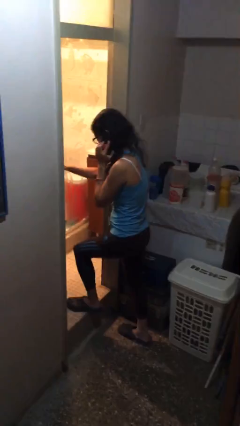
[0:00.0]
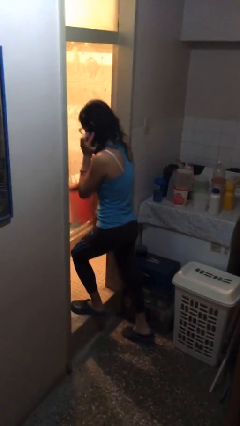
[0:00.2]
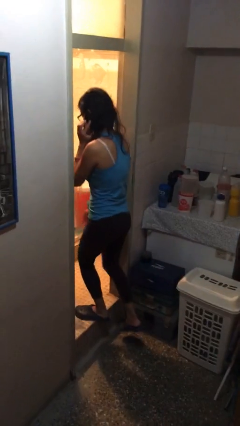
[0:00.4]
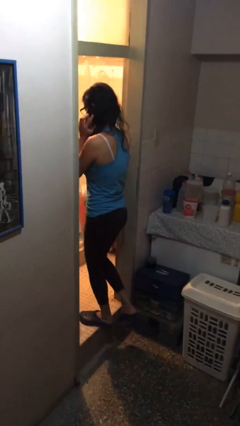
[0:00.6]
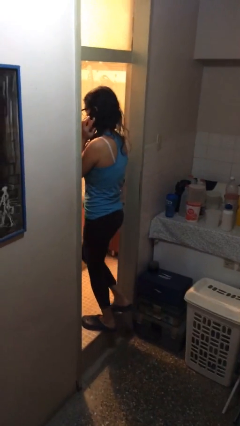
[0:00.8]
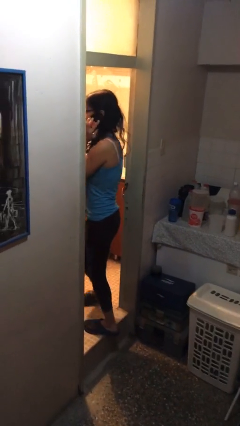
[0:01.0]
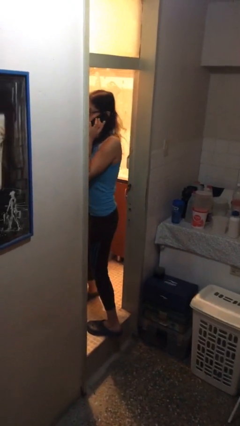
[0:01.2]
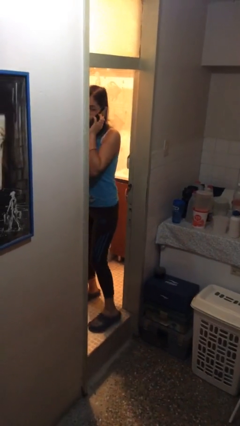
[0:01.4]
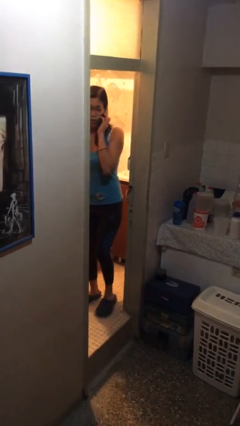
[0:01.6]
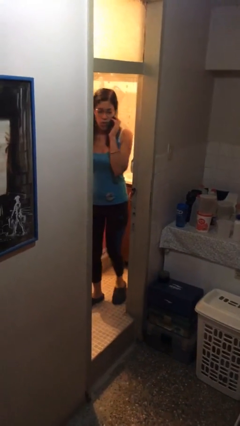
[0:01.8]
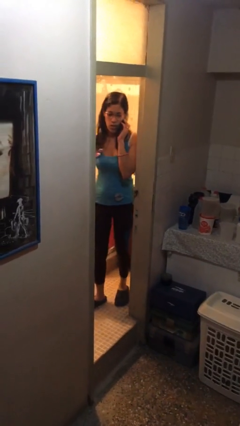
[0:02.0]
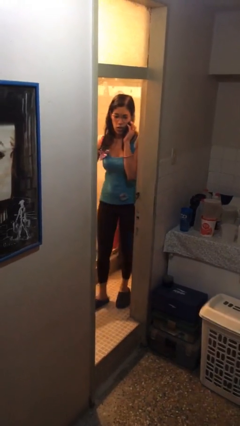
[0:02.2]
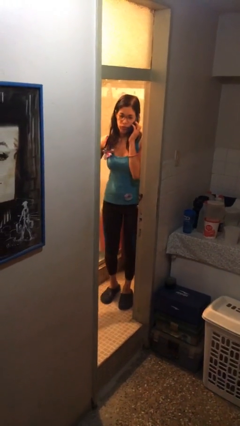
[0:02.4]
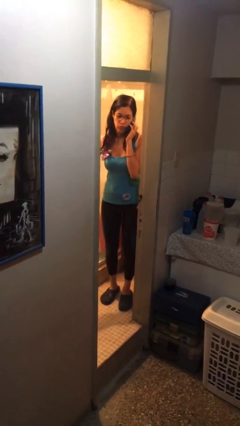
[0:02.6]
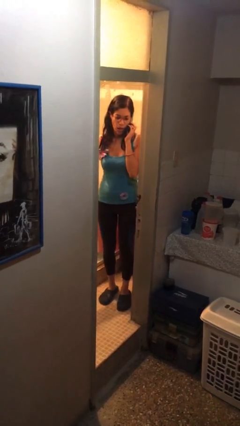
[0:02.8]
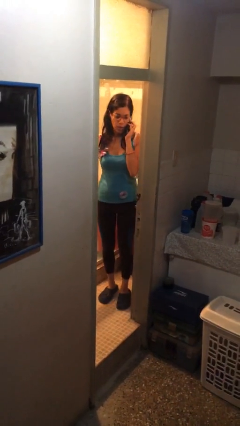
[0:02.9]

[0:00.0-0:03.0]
person exits scene through structure

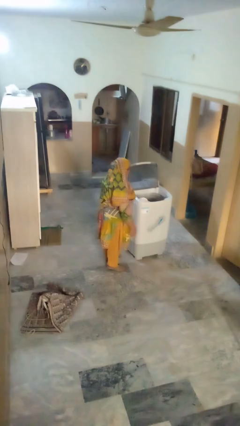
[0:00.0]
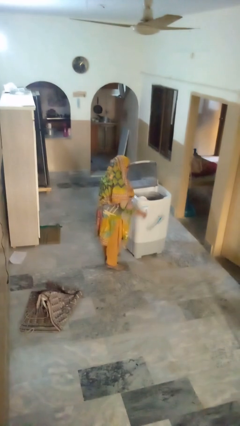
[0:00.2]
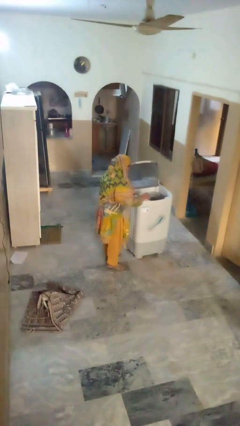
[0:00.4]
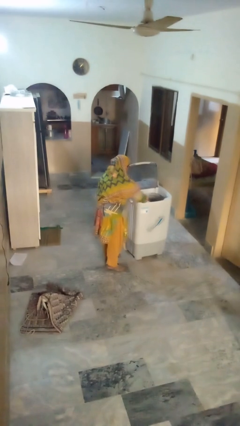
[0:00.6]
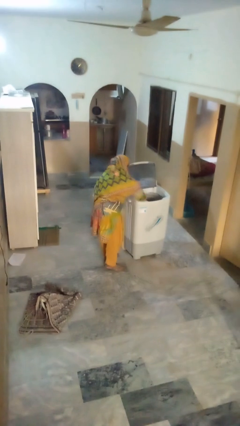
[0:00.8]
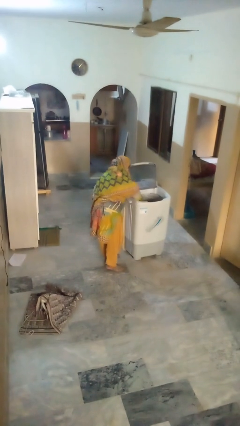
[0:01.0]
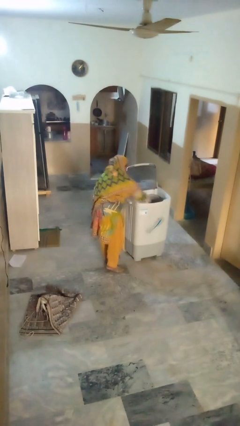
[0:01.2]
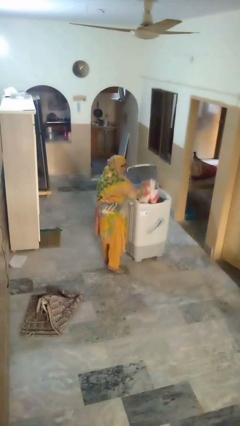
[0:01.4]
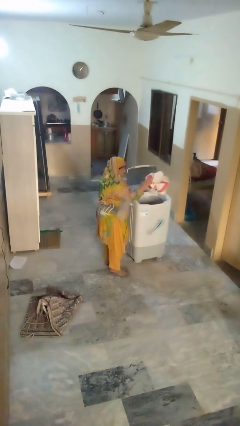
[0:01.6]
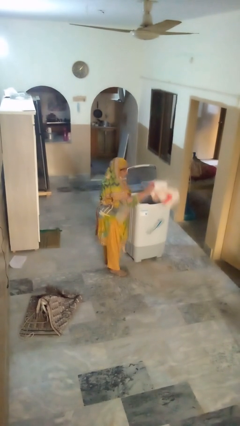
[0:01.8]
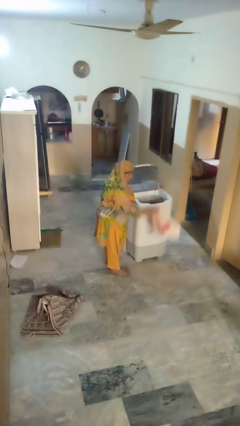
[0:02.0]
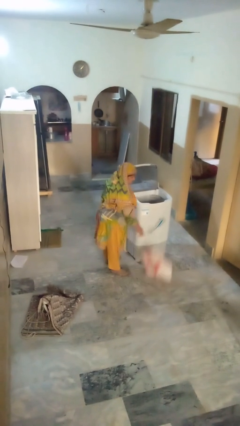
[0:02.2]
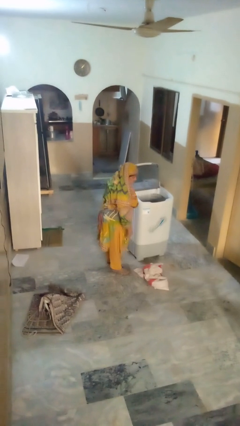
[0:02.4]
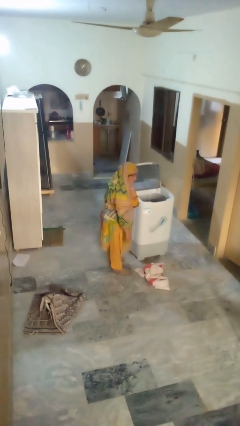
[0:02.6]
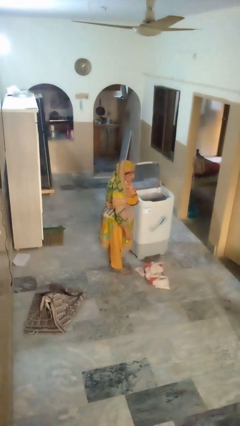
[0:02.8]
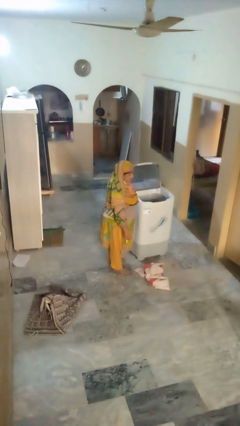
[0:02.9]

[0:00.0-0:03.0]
person unloads clotheswasher

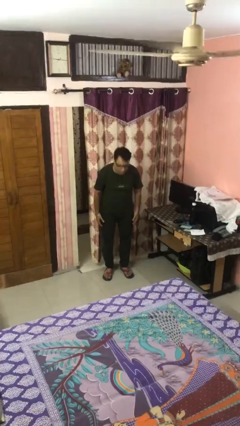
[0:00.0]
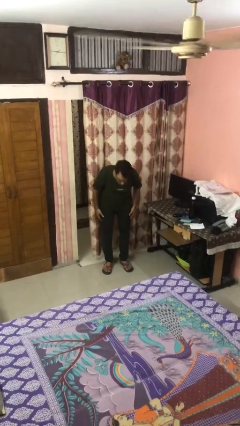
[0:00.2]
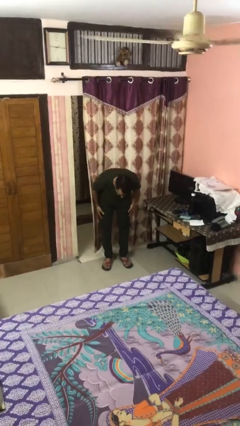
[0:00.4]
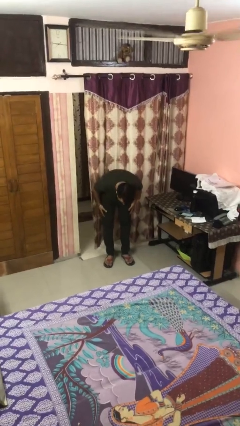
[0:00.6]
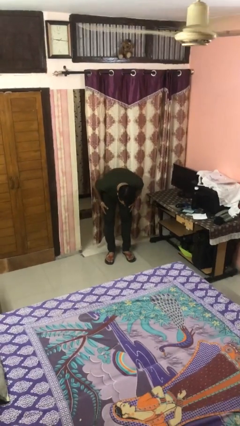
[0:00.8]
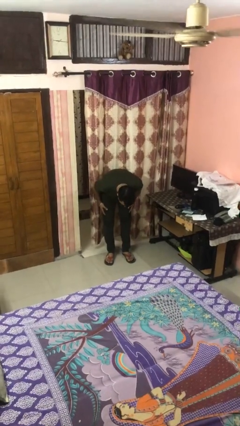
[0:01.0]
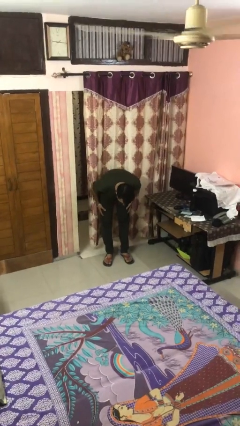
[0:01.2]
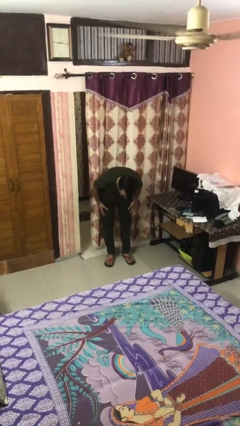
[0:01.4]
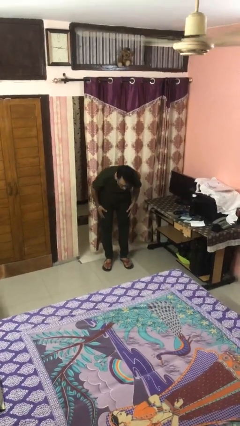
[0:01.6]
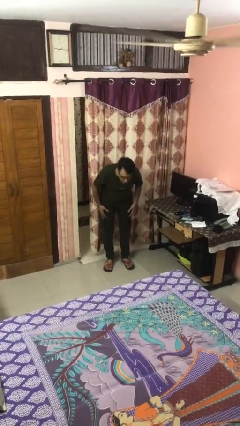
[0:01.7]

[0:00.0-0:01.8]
person bows

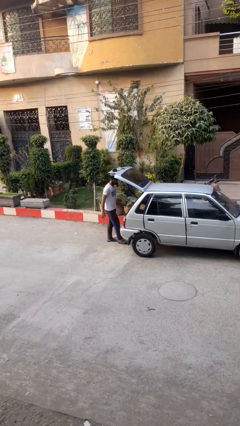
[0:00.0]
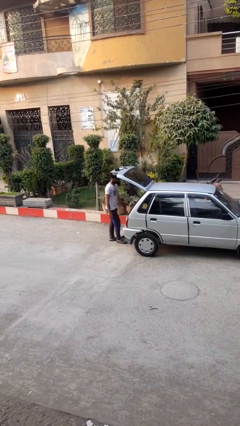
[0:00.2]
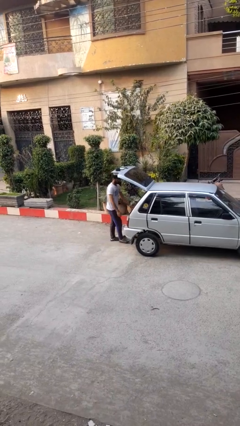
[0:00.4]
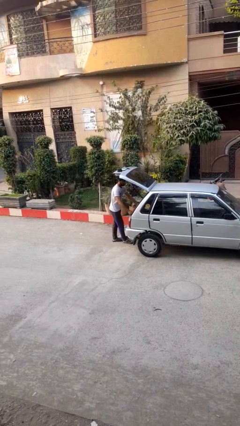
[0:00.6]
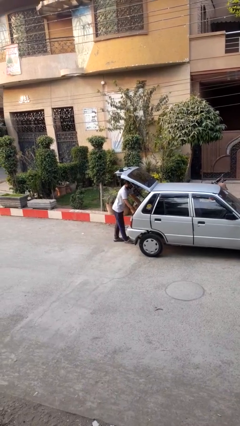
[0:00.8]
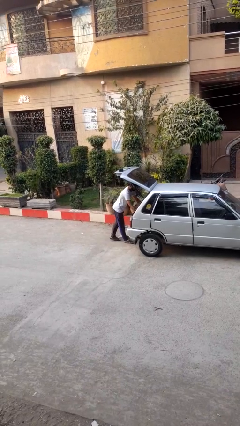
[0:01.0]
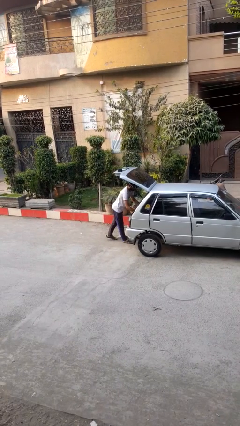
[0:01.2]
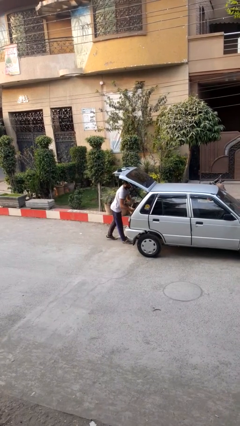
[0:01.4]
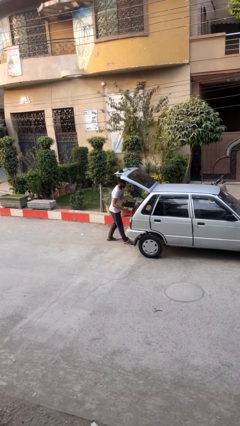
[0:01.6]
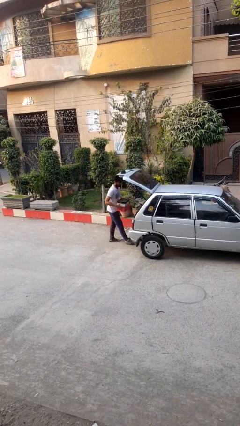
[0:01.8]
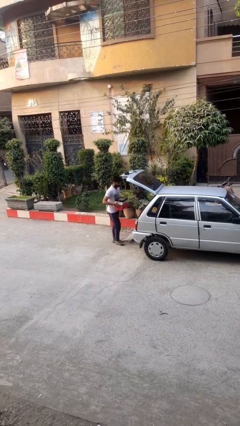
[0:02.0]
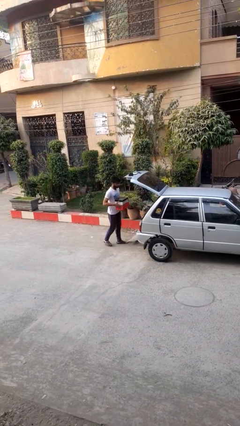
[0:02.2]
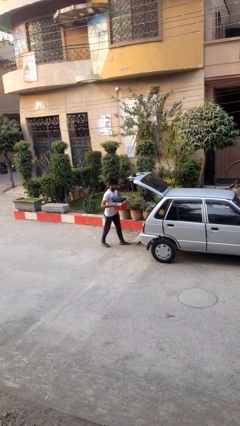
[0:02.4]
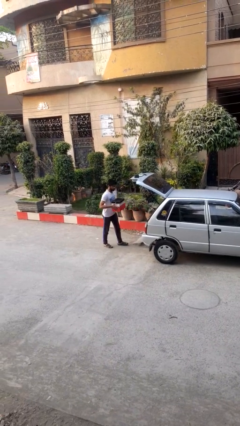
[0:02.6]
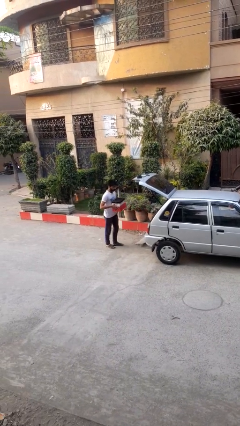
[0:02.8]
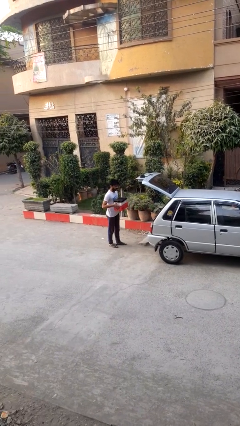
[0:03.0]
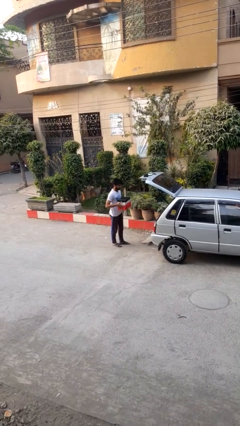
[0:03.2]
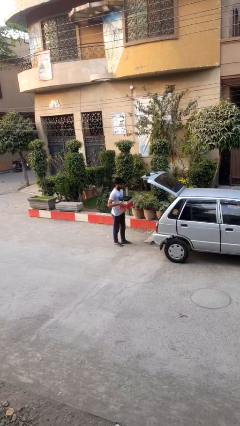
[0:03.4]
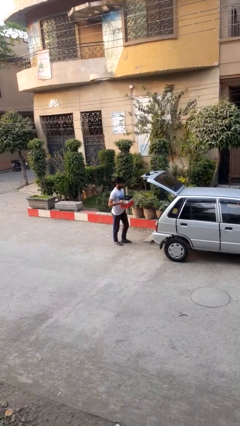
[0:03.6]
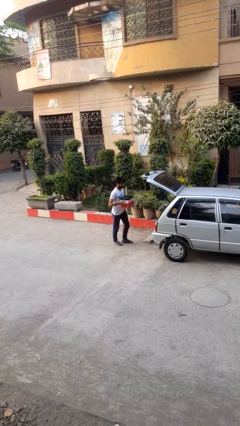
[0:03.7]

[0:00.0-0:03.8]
person unloads car

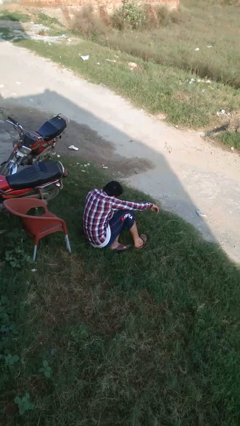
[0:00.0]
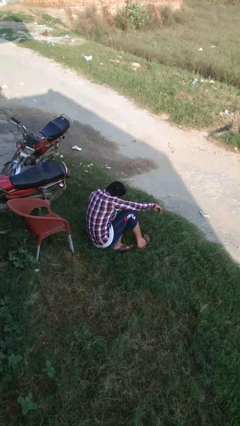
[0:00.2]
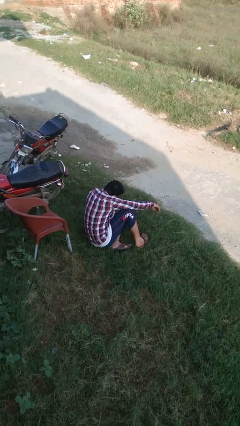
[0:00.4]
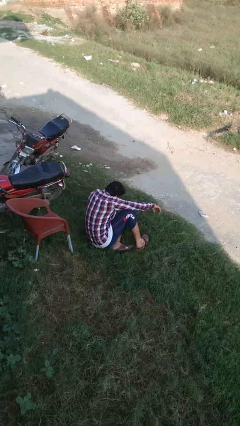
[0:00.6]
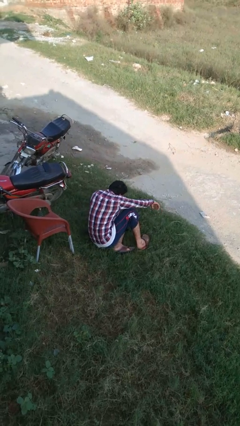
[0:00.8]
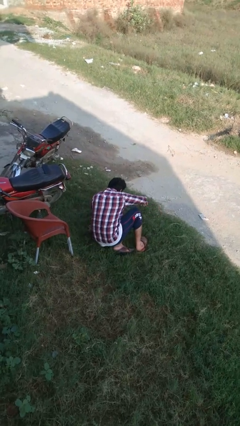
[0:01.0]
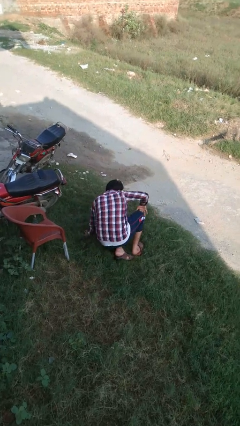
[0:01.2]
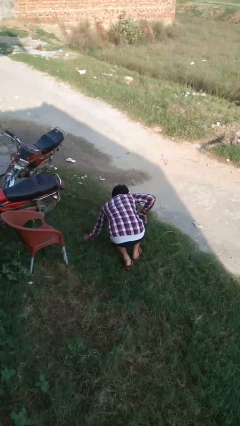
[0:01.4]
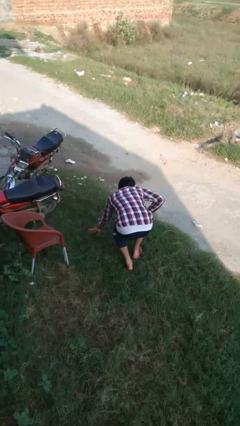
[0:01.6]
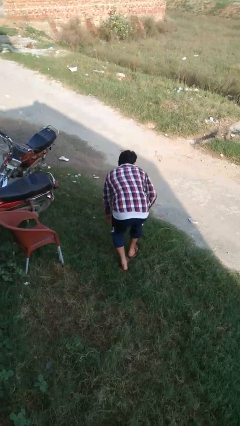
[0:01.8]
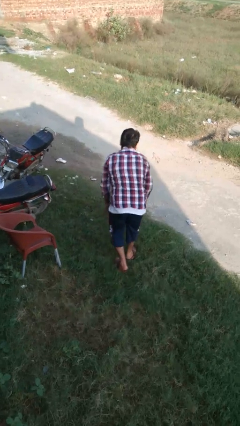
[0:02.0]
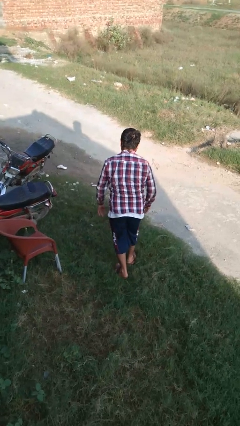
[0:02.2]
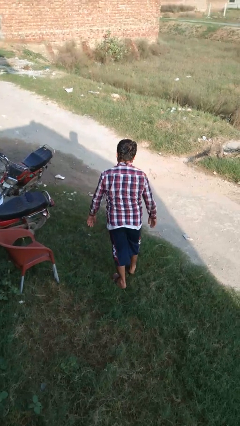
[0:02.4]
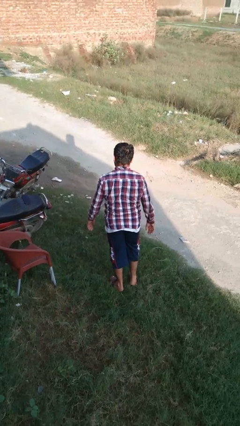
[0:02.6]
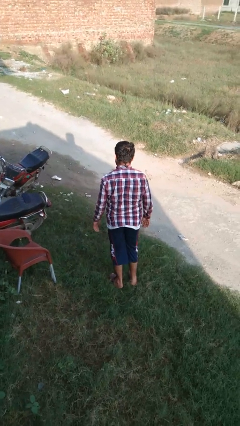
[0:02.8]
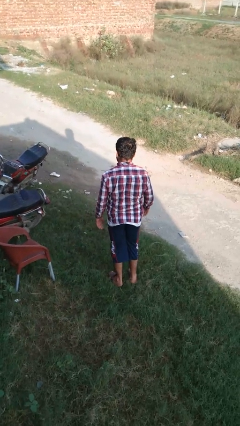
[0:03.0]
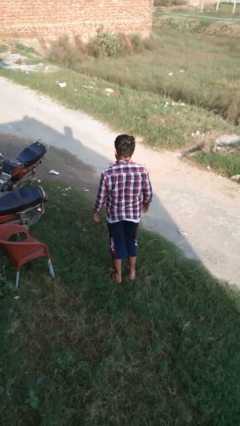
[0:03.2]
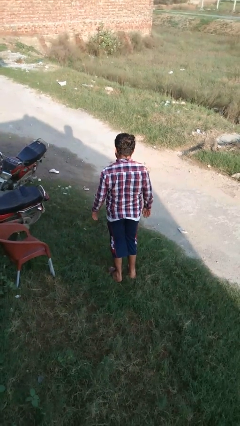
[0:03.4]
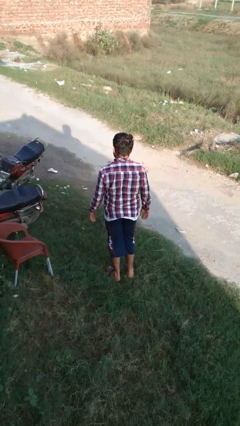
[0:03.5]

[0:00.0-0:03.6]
person stands up from floor

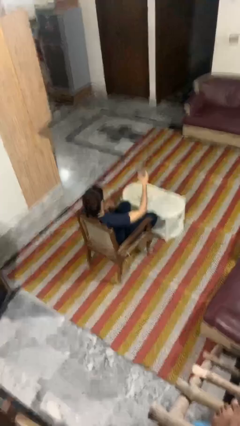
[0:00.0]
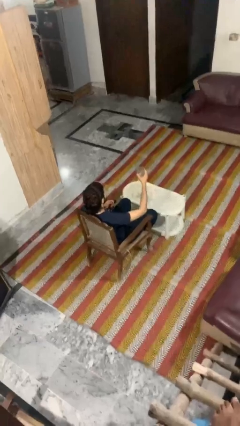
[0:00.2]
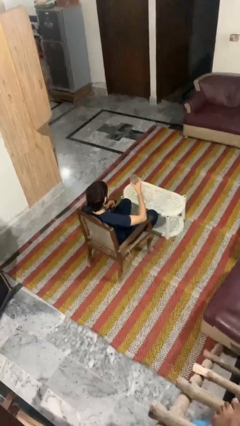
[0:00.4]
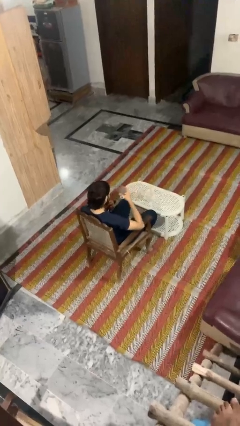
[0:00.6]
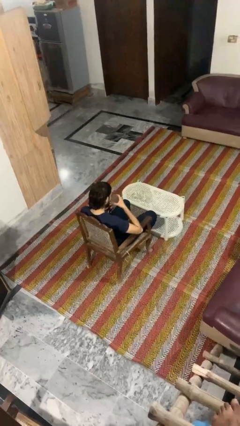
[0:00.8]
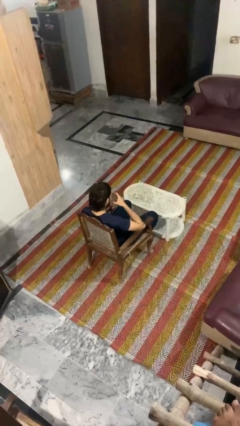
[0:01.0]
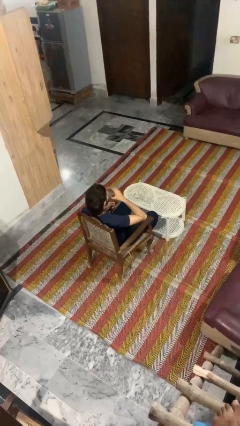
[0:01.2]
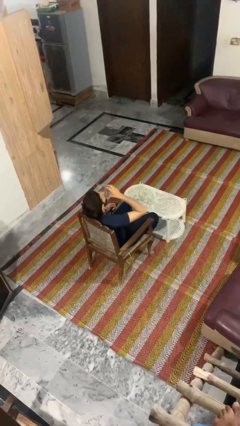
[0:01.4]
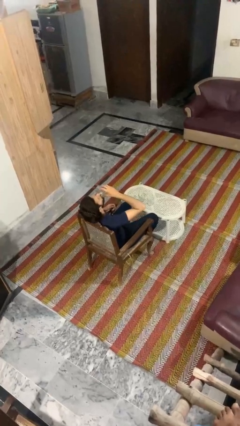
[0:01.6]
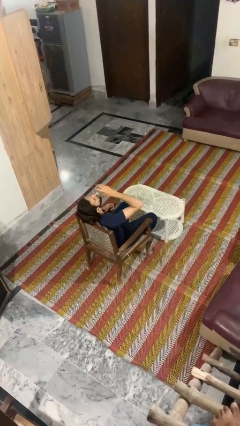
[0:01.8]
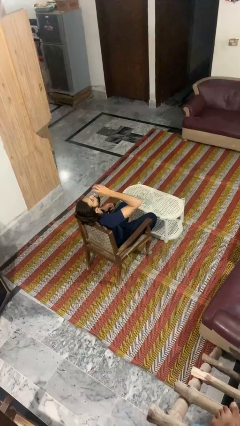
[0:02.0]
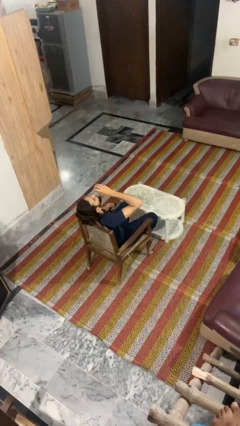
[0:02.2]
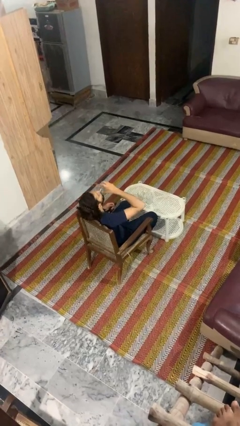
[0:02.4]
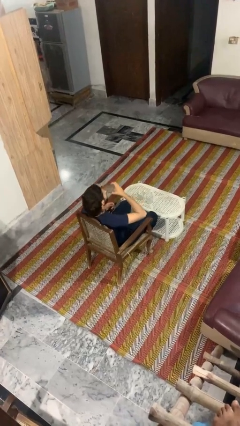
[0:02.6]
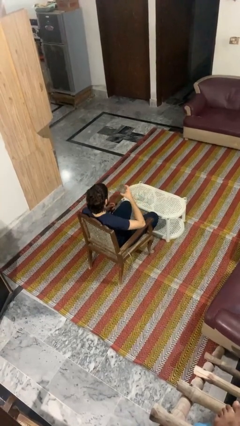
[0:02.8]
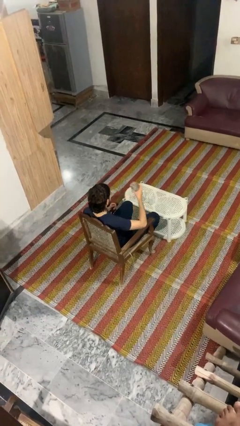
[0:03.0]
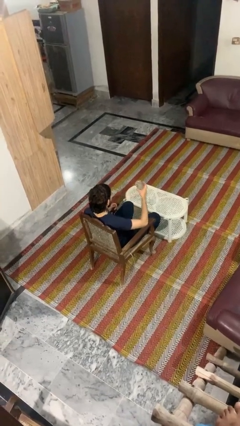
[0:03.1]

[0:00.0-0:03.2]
person drinks from shotglass
